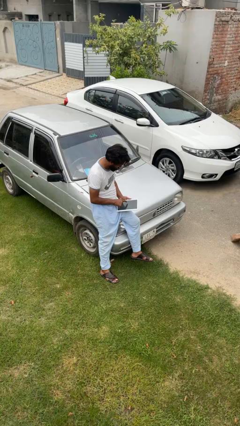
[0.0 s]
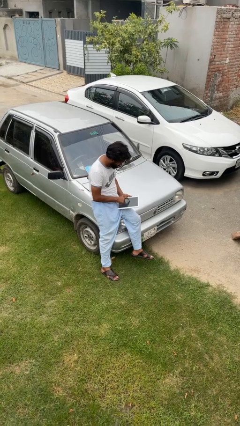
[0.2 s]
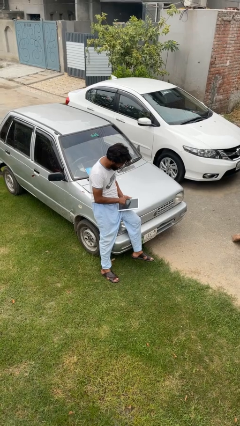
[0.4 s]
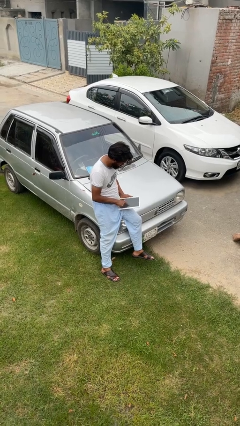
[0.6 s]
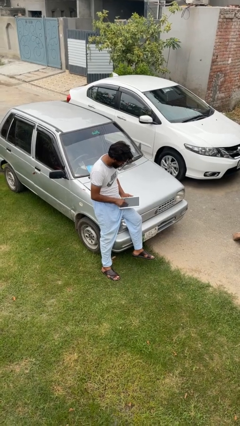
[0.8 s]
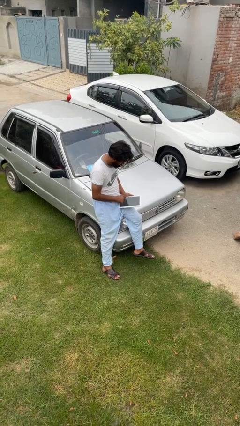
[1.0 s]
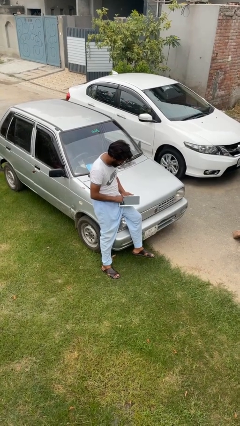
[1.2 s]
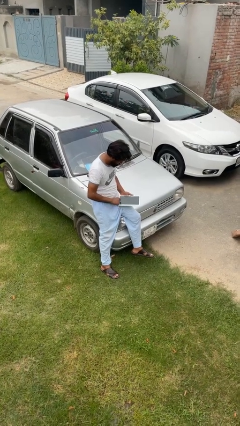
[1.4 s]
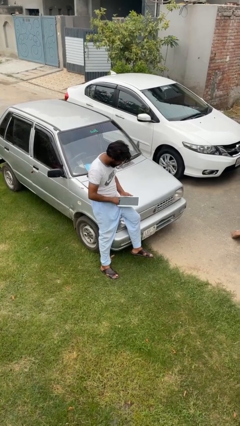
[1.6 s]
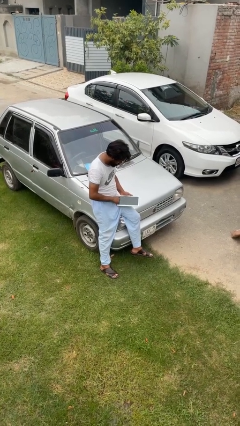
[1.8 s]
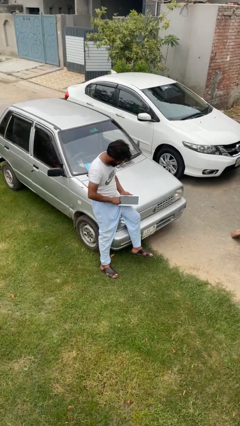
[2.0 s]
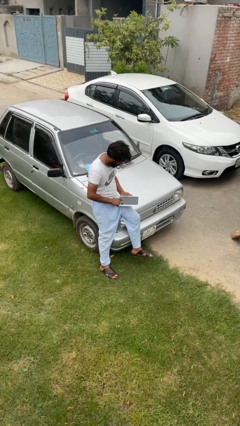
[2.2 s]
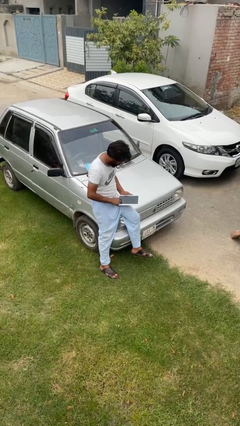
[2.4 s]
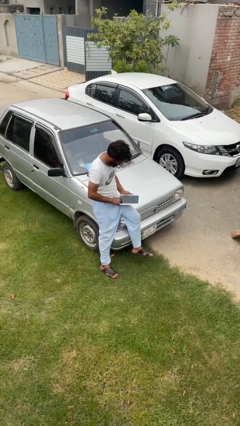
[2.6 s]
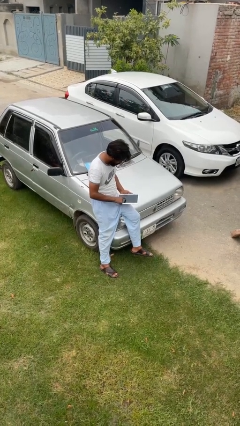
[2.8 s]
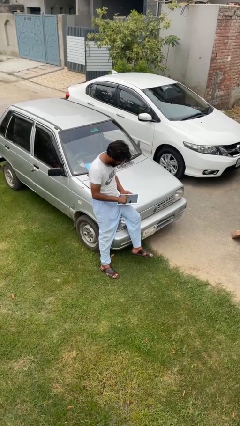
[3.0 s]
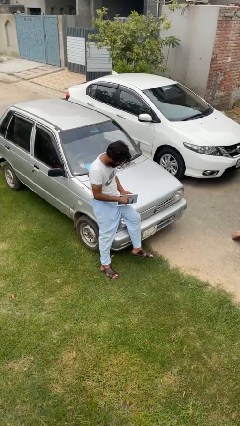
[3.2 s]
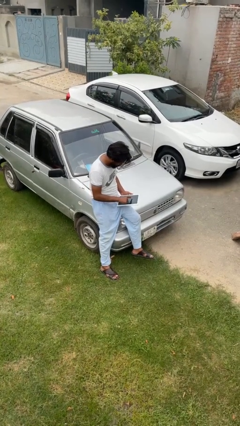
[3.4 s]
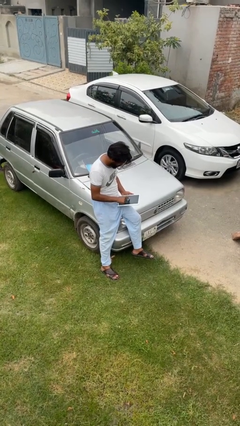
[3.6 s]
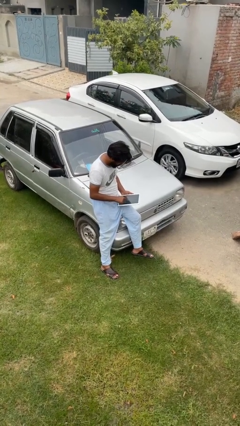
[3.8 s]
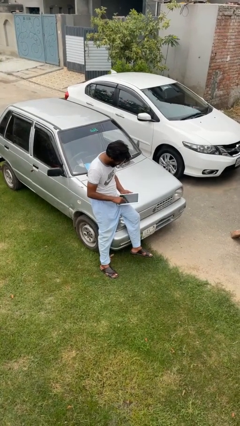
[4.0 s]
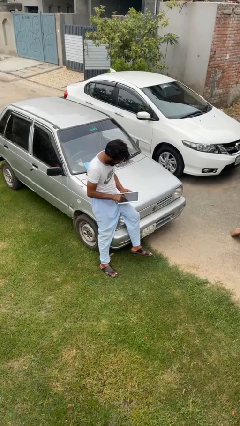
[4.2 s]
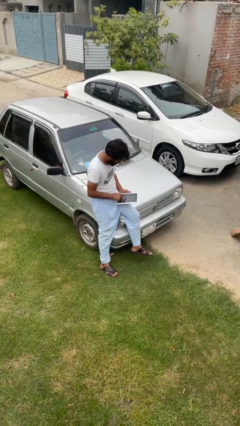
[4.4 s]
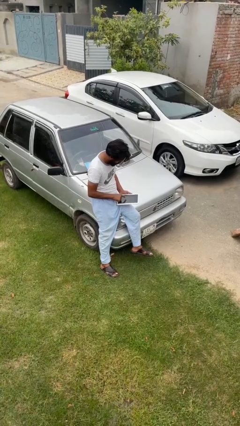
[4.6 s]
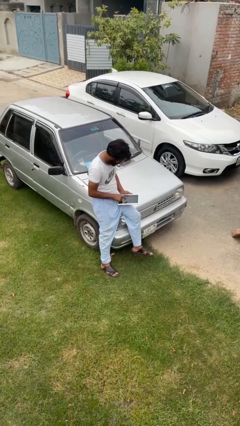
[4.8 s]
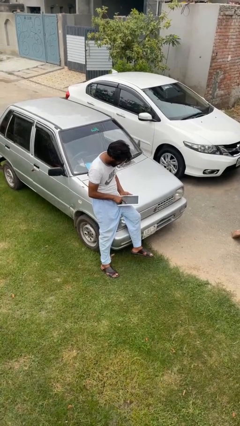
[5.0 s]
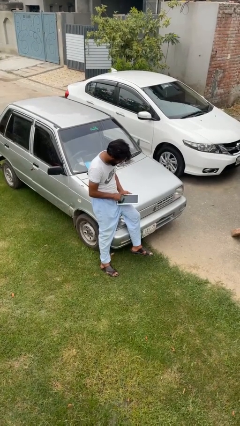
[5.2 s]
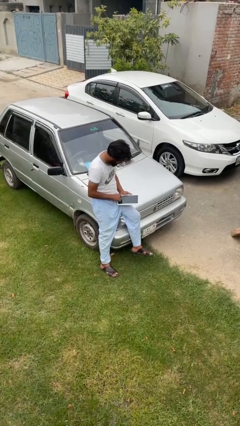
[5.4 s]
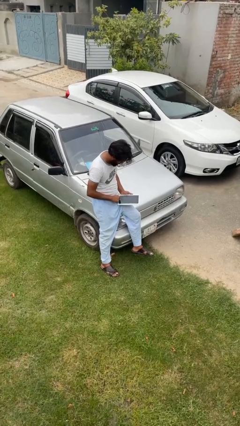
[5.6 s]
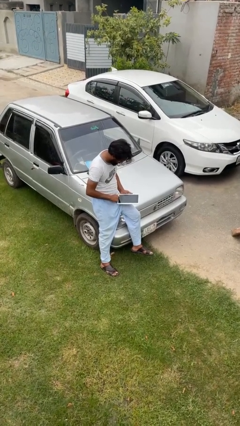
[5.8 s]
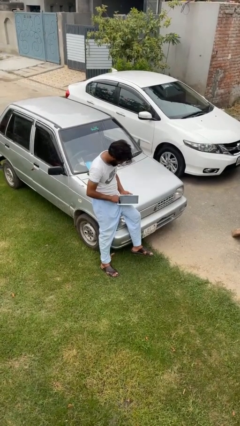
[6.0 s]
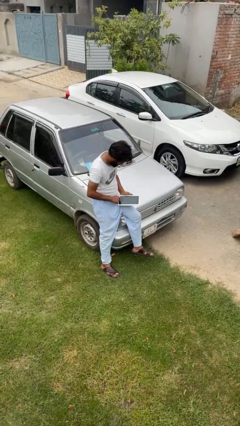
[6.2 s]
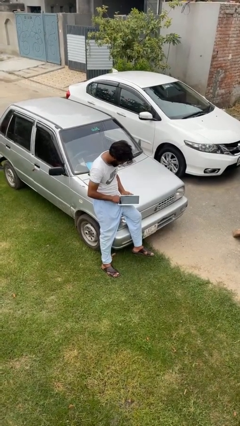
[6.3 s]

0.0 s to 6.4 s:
person interacts with tablet

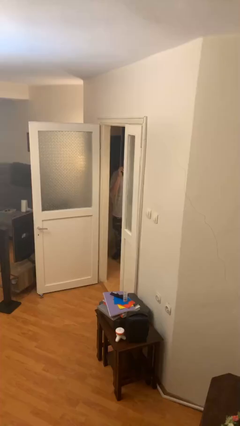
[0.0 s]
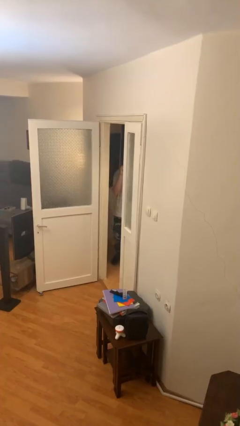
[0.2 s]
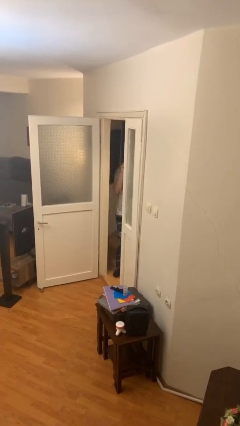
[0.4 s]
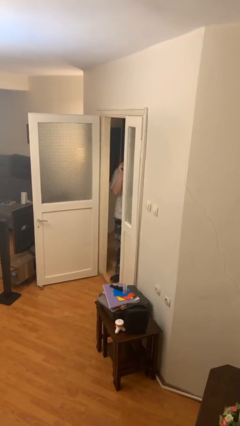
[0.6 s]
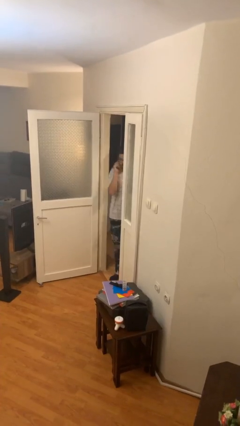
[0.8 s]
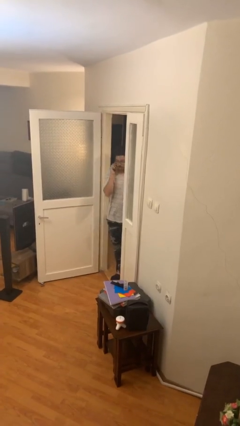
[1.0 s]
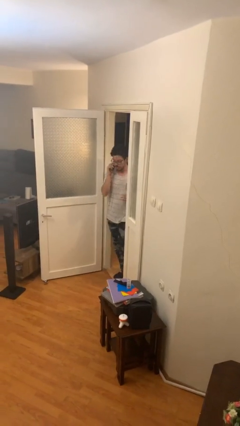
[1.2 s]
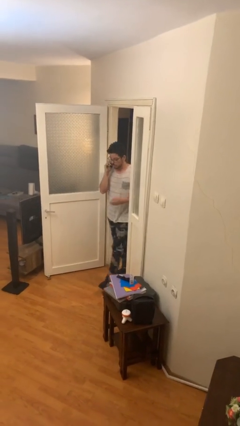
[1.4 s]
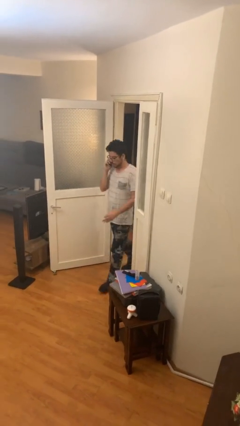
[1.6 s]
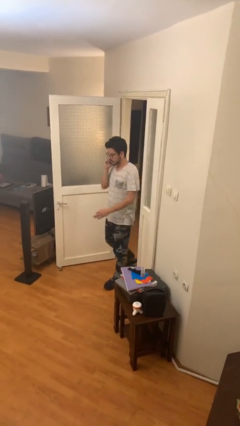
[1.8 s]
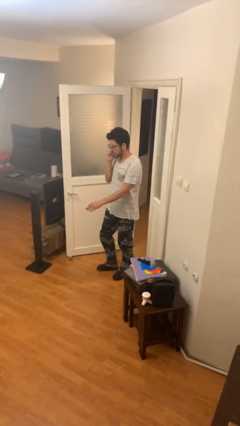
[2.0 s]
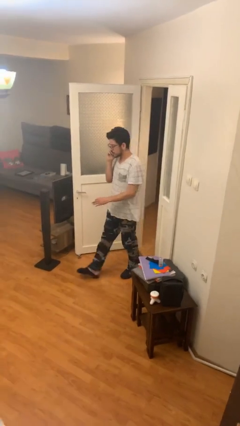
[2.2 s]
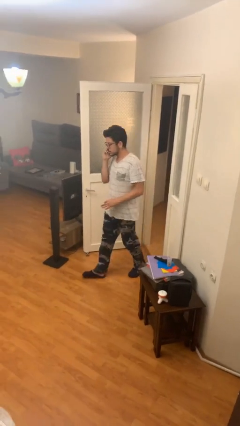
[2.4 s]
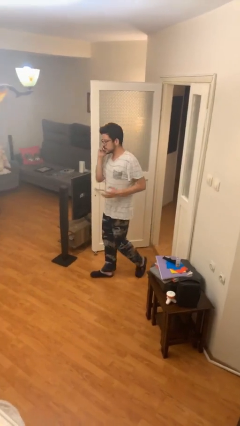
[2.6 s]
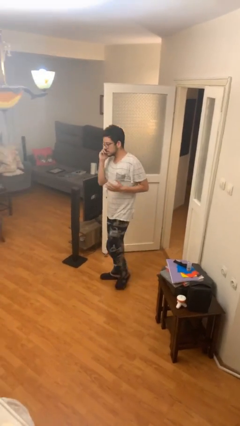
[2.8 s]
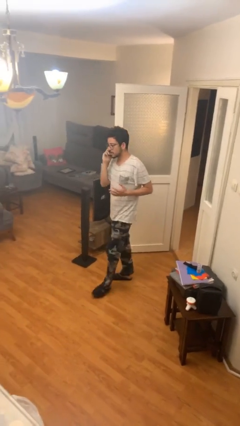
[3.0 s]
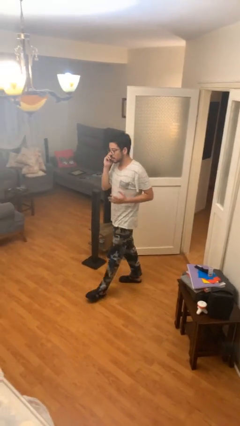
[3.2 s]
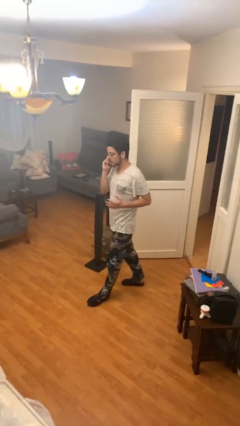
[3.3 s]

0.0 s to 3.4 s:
person enters scene through structure

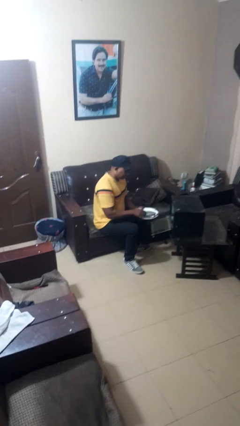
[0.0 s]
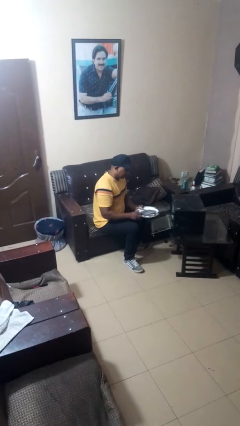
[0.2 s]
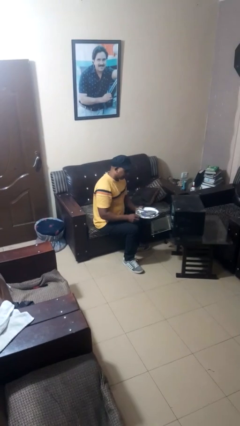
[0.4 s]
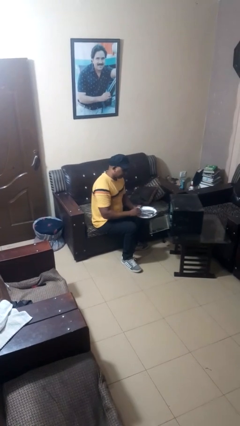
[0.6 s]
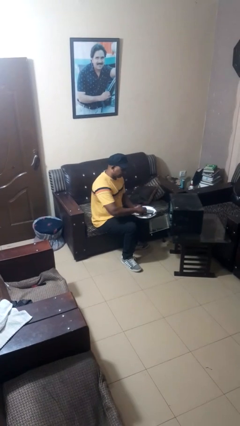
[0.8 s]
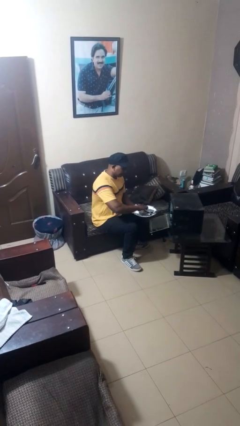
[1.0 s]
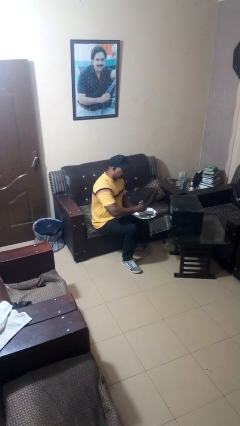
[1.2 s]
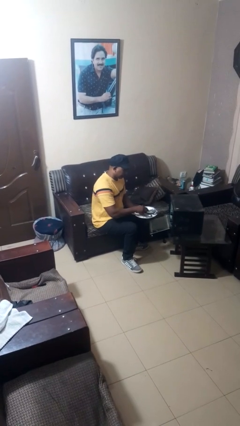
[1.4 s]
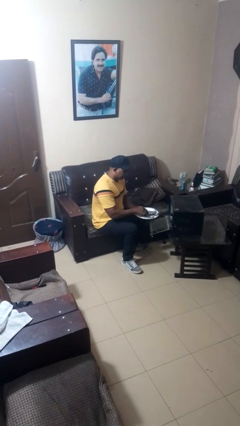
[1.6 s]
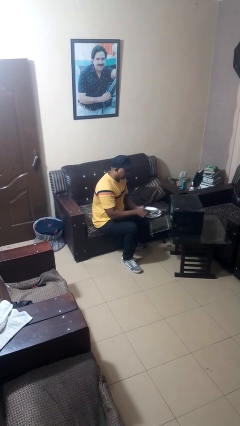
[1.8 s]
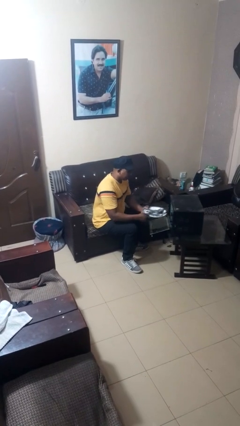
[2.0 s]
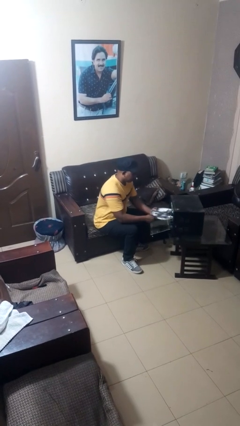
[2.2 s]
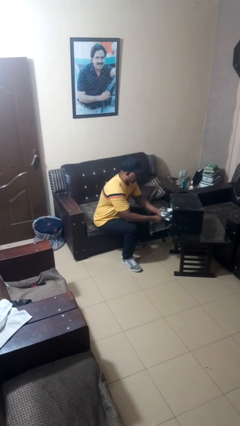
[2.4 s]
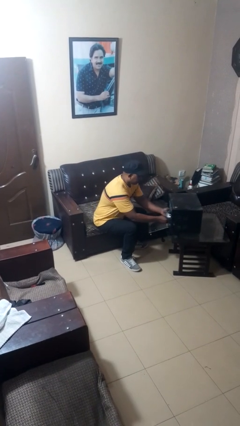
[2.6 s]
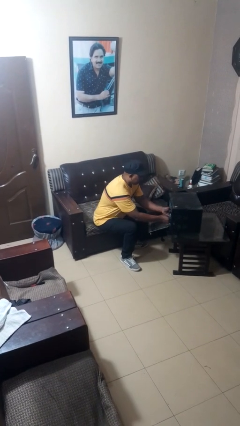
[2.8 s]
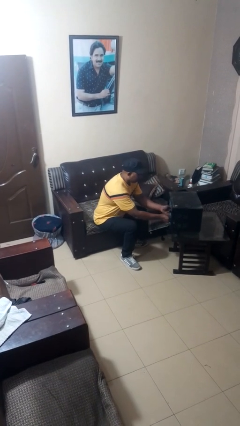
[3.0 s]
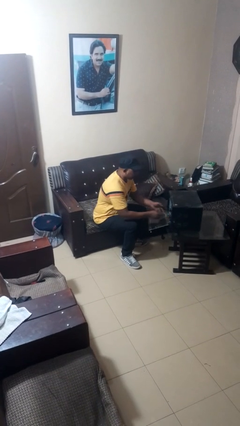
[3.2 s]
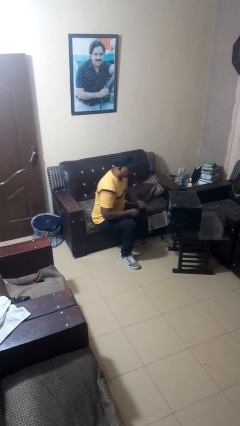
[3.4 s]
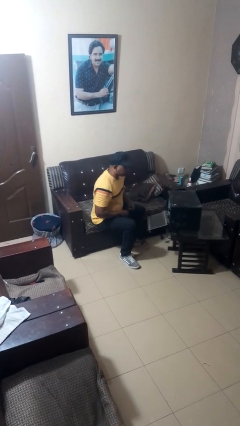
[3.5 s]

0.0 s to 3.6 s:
person loads dishwasher

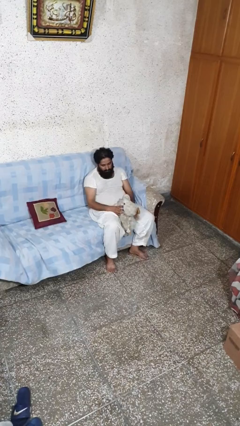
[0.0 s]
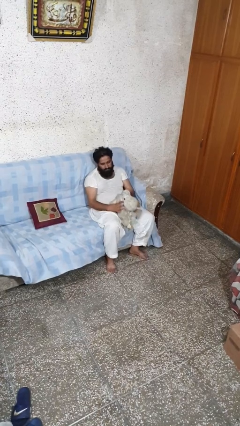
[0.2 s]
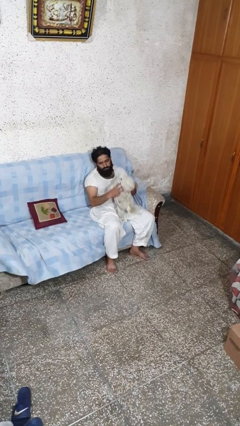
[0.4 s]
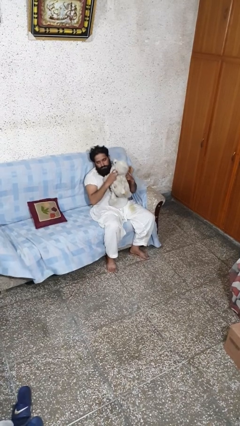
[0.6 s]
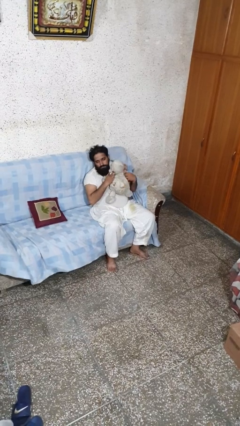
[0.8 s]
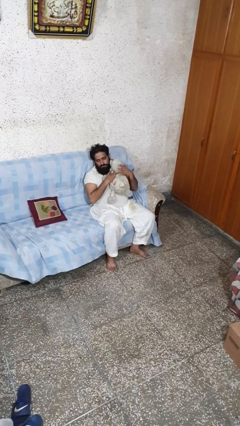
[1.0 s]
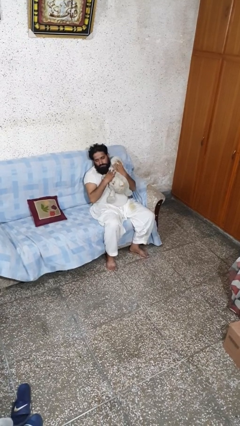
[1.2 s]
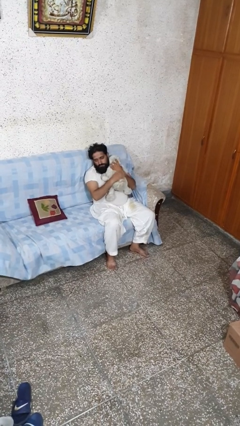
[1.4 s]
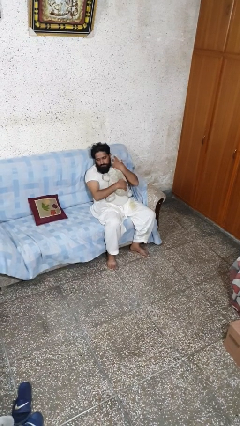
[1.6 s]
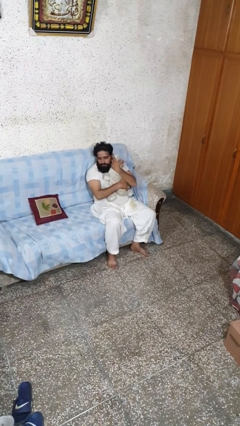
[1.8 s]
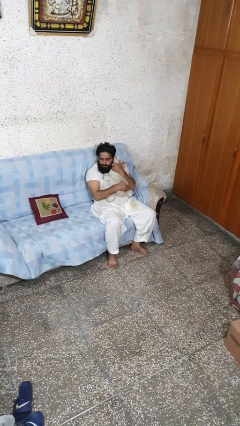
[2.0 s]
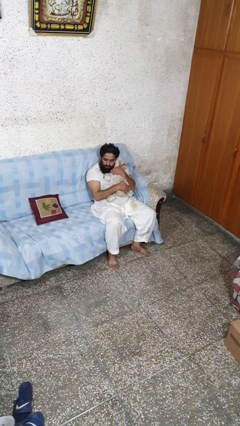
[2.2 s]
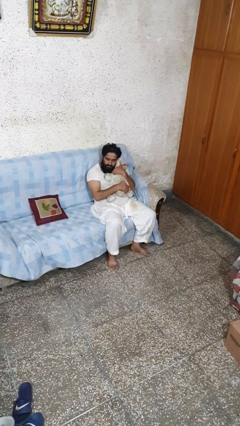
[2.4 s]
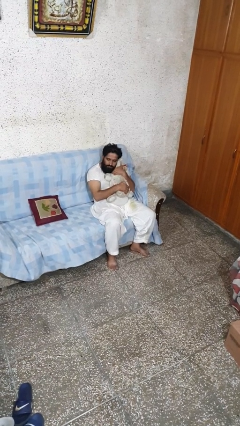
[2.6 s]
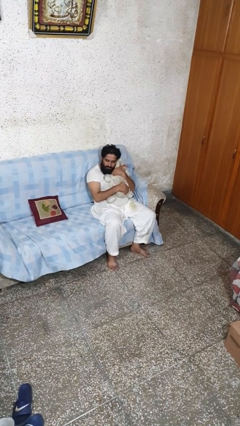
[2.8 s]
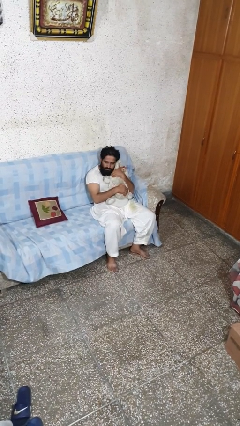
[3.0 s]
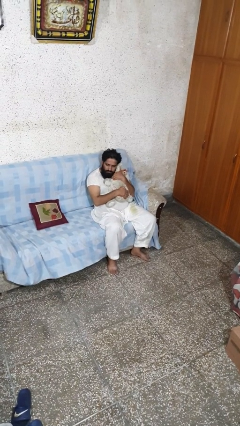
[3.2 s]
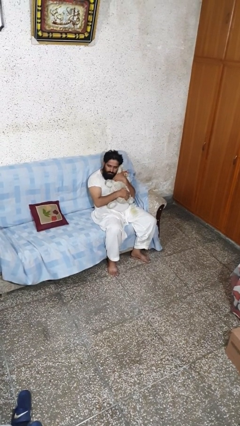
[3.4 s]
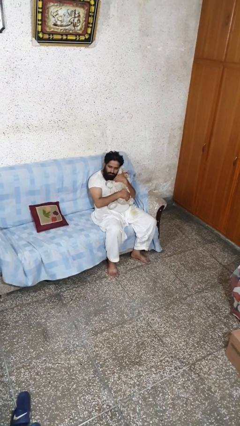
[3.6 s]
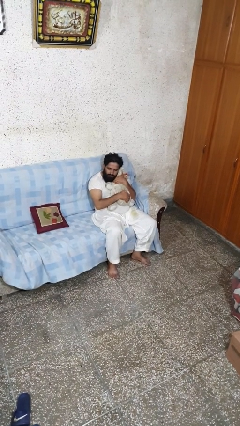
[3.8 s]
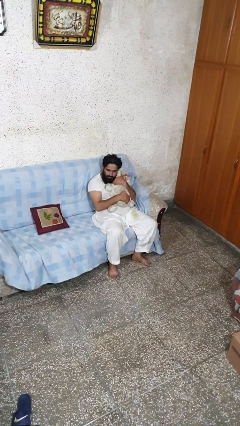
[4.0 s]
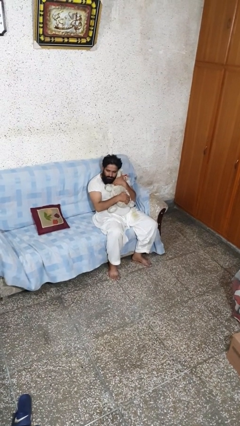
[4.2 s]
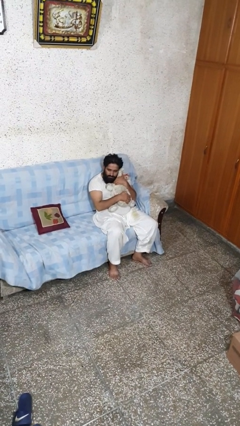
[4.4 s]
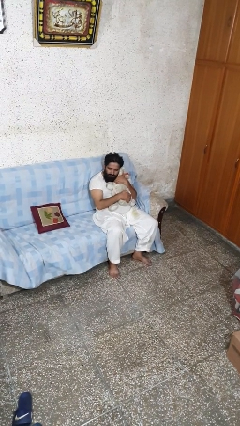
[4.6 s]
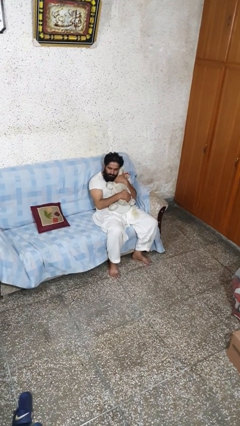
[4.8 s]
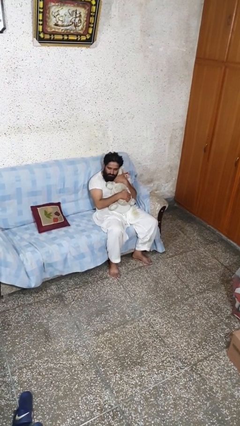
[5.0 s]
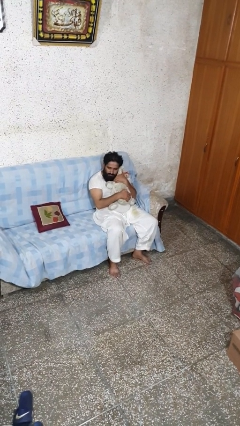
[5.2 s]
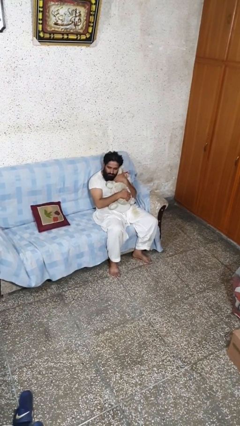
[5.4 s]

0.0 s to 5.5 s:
person hugs stuffed animal
